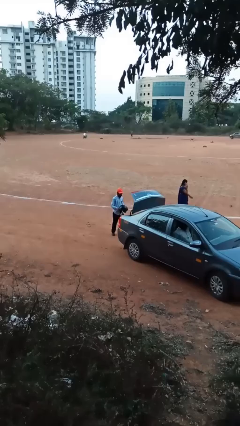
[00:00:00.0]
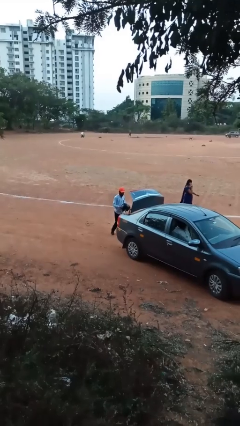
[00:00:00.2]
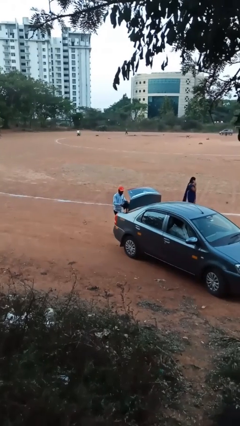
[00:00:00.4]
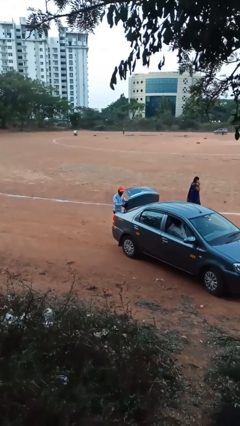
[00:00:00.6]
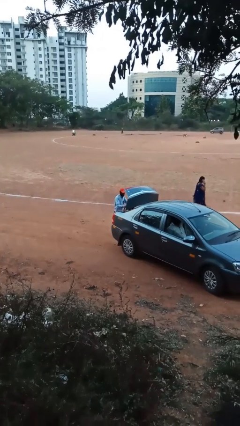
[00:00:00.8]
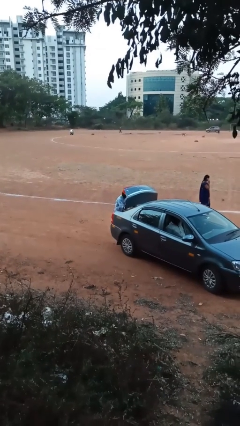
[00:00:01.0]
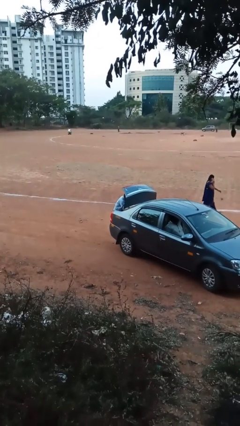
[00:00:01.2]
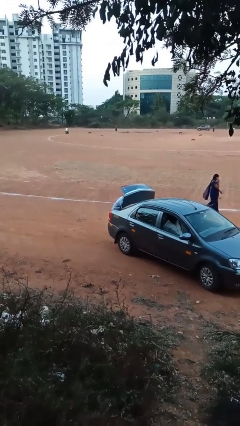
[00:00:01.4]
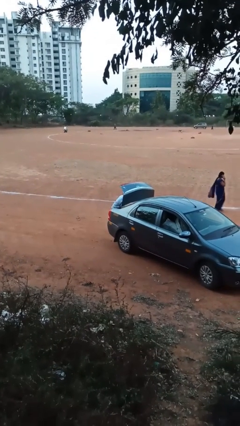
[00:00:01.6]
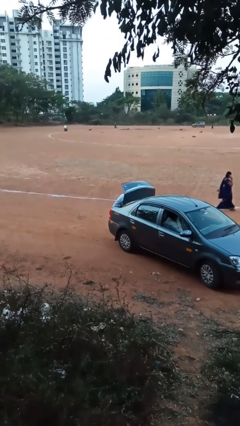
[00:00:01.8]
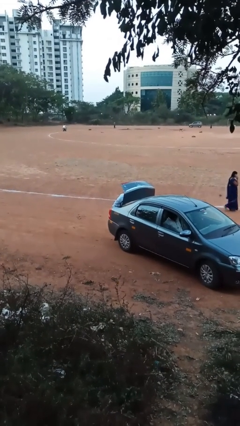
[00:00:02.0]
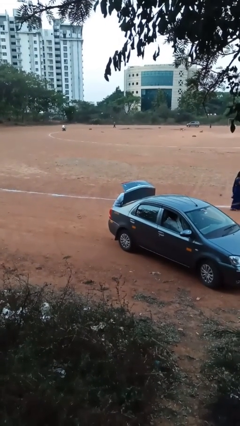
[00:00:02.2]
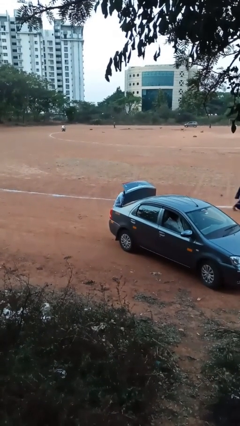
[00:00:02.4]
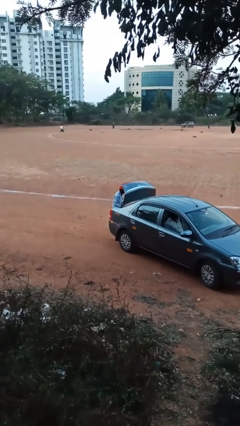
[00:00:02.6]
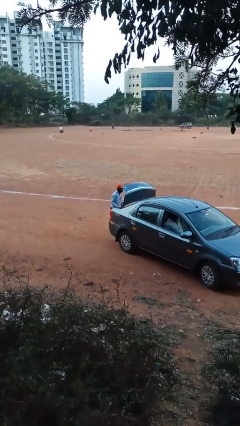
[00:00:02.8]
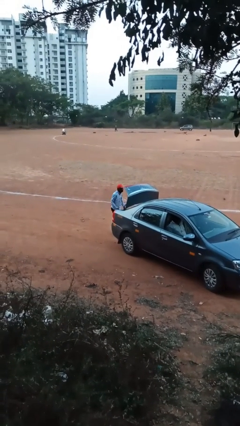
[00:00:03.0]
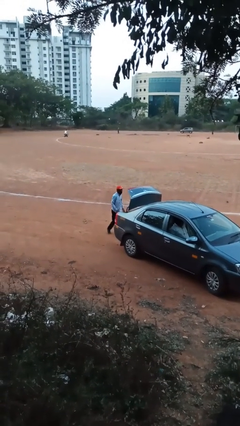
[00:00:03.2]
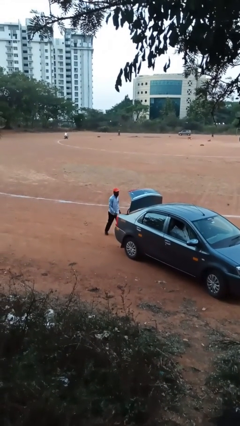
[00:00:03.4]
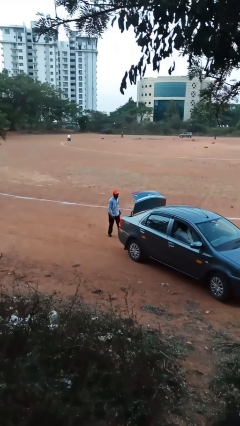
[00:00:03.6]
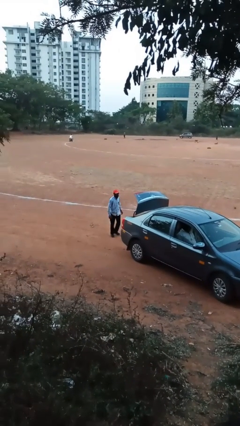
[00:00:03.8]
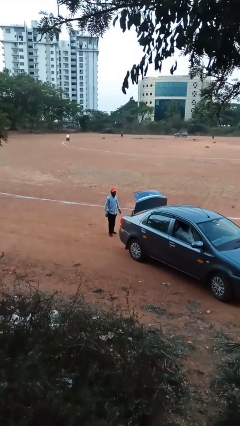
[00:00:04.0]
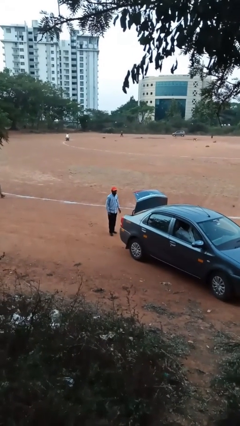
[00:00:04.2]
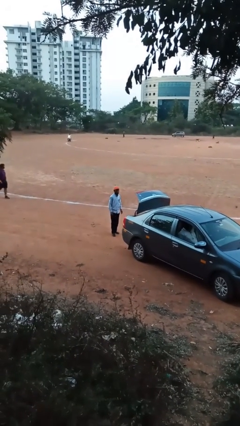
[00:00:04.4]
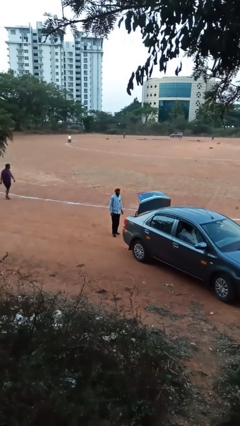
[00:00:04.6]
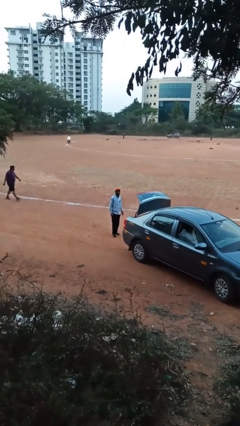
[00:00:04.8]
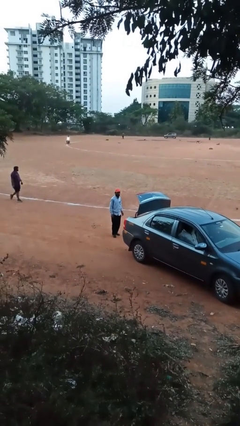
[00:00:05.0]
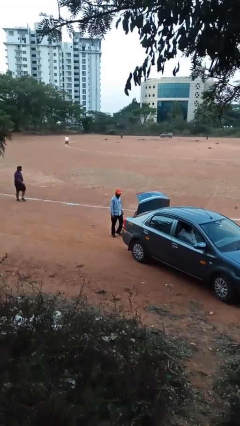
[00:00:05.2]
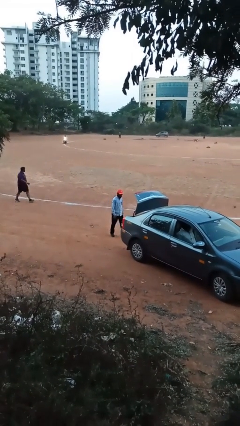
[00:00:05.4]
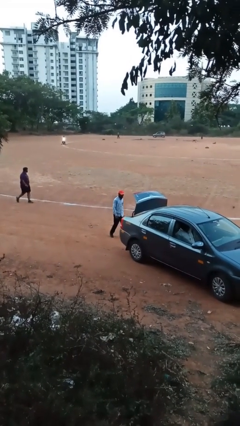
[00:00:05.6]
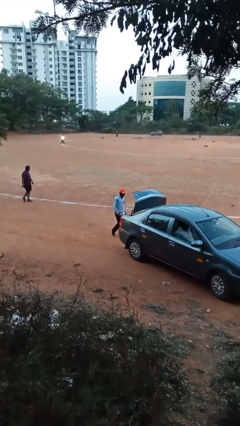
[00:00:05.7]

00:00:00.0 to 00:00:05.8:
person loads car

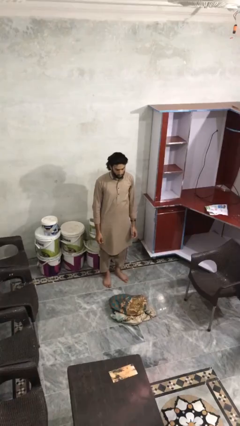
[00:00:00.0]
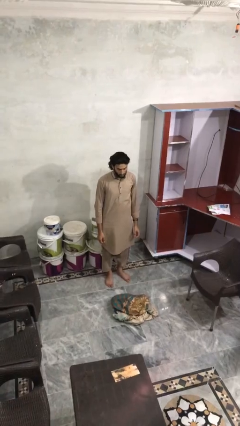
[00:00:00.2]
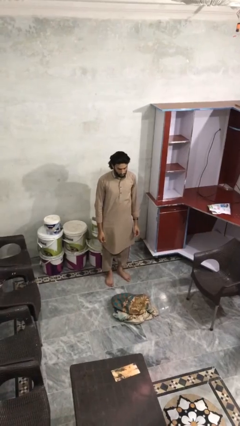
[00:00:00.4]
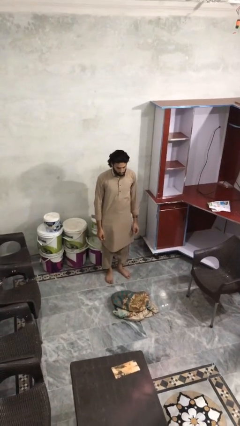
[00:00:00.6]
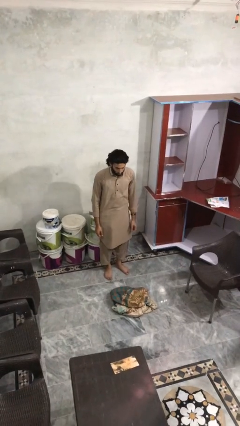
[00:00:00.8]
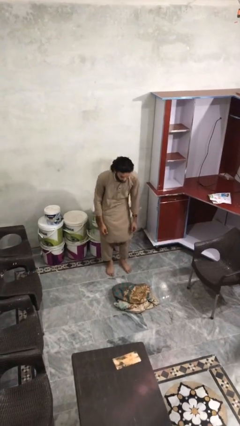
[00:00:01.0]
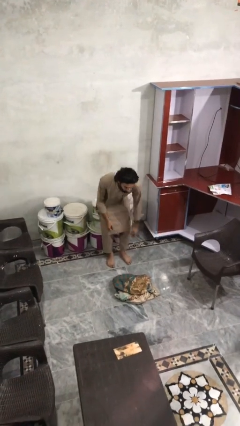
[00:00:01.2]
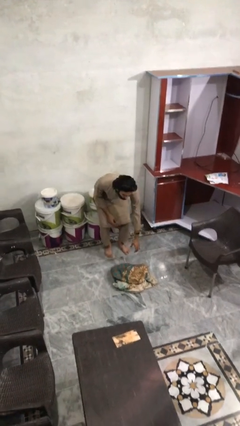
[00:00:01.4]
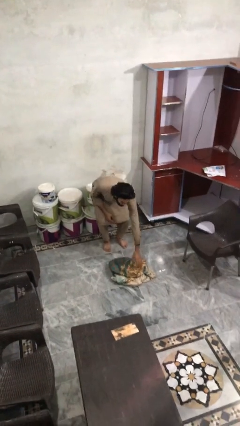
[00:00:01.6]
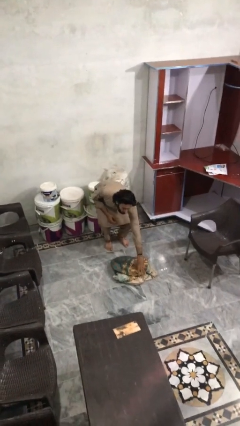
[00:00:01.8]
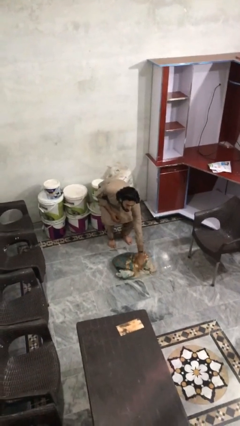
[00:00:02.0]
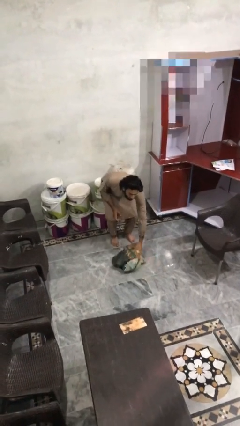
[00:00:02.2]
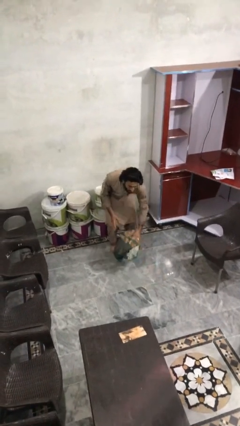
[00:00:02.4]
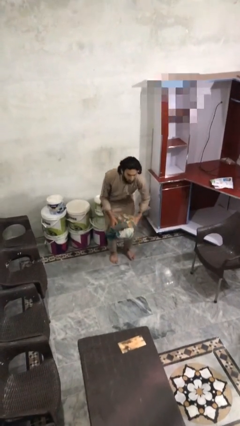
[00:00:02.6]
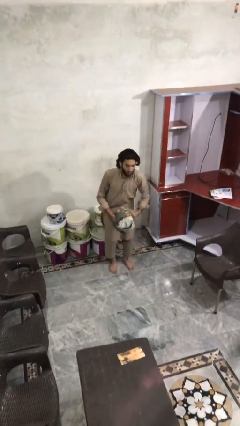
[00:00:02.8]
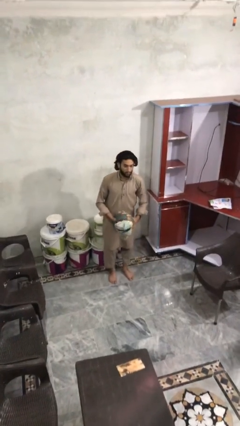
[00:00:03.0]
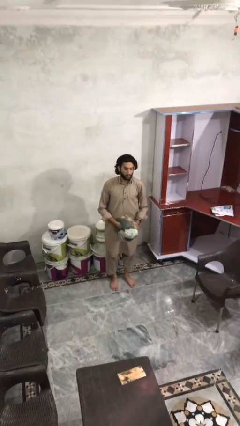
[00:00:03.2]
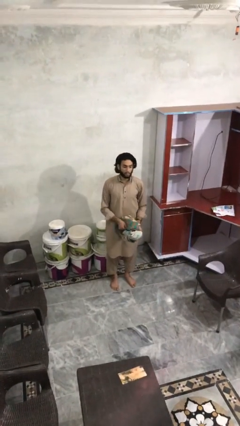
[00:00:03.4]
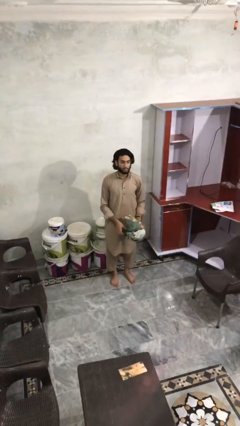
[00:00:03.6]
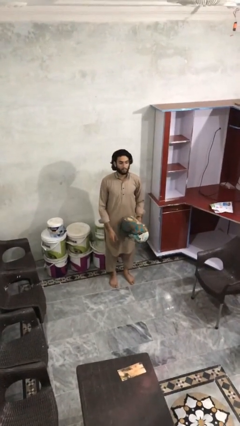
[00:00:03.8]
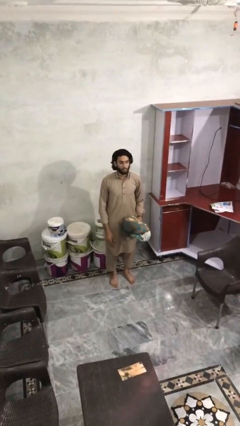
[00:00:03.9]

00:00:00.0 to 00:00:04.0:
person picks up object from floor

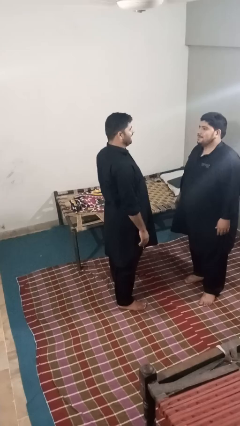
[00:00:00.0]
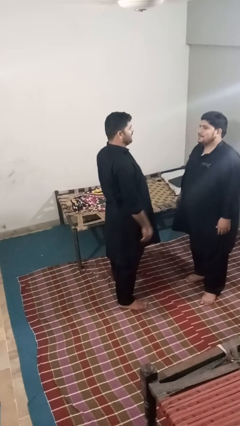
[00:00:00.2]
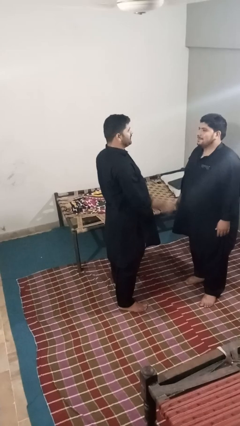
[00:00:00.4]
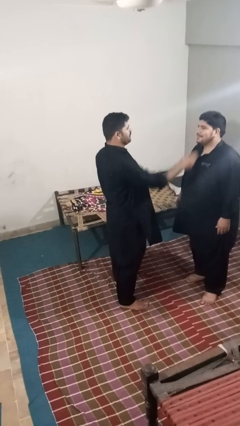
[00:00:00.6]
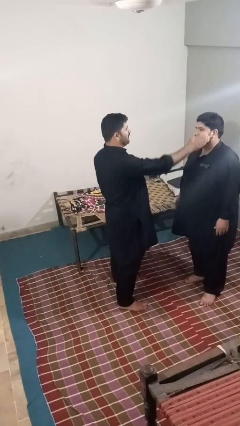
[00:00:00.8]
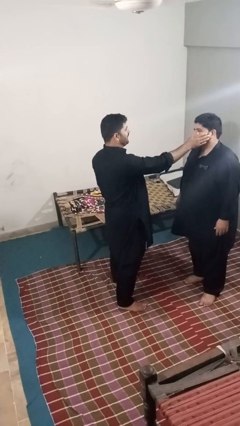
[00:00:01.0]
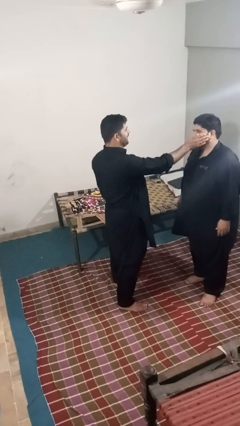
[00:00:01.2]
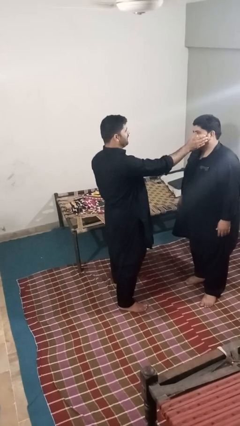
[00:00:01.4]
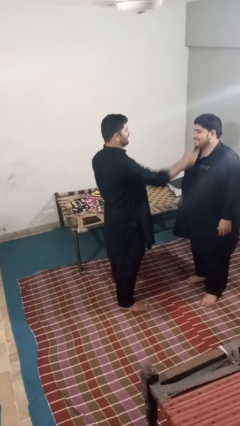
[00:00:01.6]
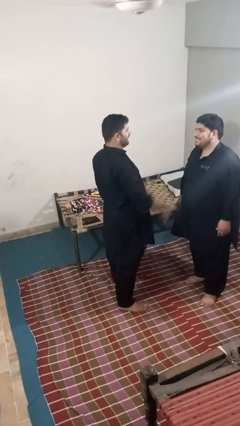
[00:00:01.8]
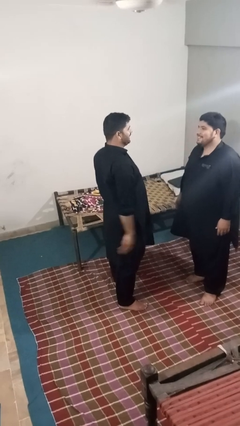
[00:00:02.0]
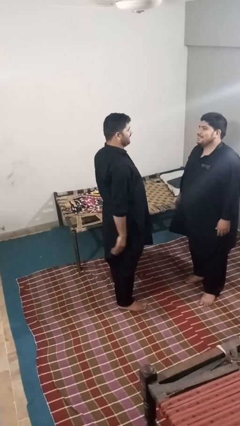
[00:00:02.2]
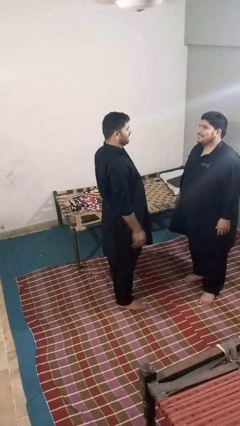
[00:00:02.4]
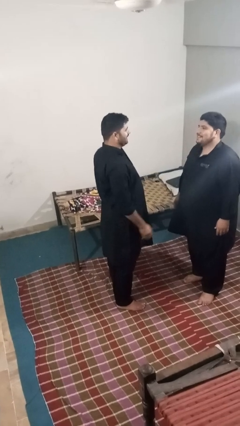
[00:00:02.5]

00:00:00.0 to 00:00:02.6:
person touches face of person

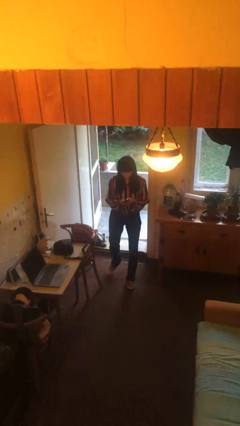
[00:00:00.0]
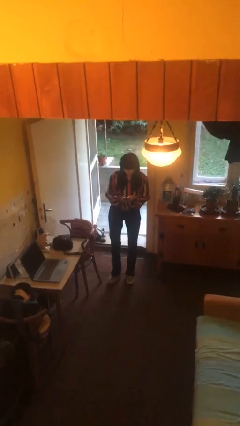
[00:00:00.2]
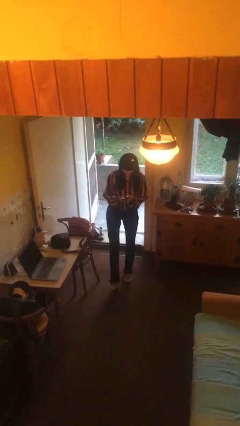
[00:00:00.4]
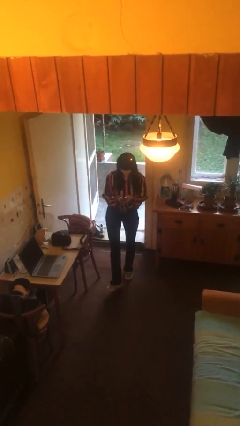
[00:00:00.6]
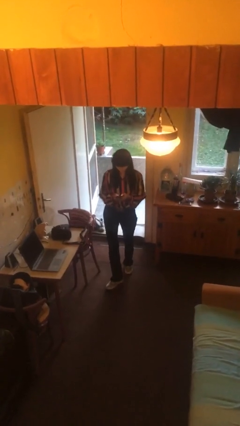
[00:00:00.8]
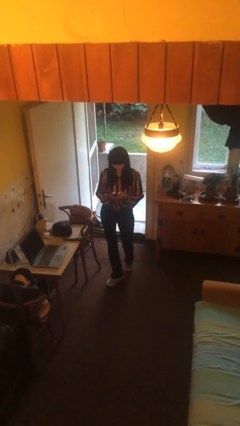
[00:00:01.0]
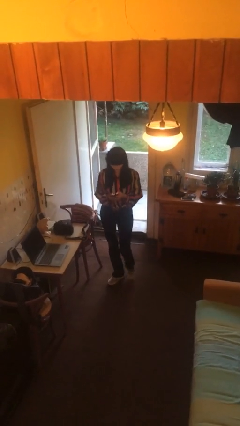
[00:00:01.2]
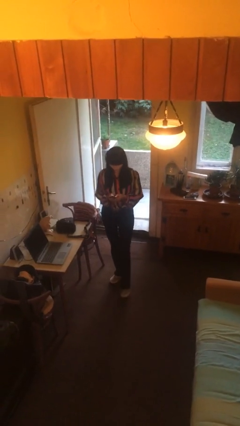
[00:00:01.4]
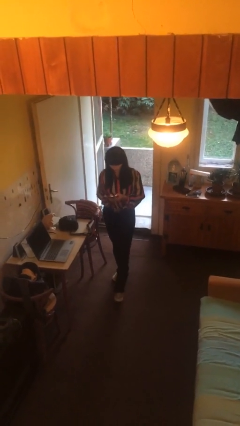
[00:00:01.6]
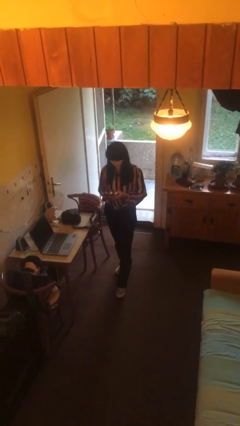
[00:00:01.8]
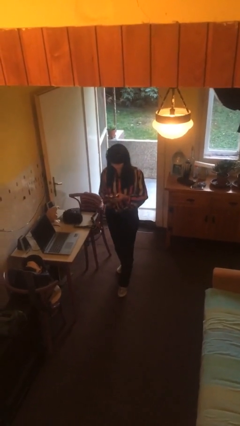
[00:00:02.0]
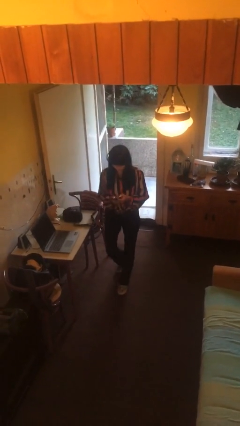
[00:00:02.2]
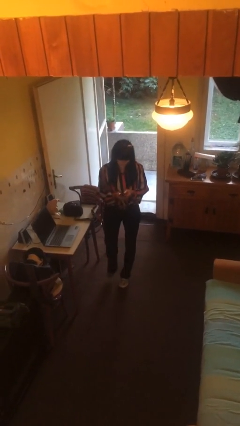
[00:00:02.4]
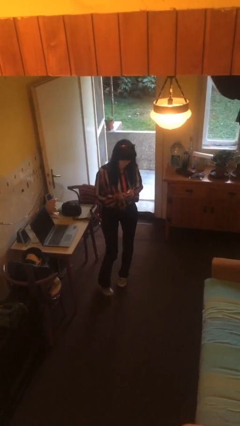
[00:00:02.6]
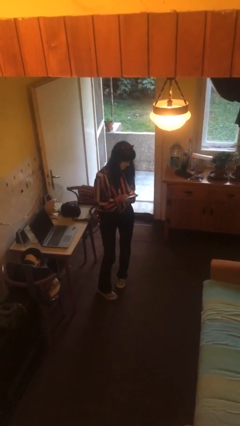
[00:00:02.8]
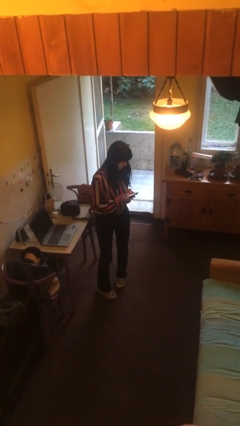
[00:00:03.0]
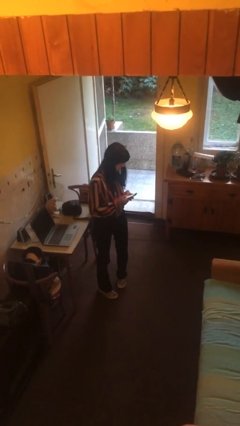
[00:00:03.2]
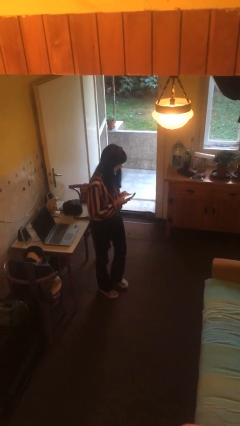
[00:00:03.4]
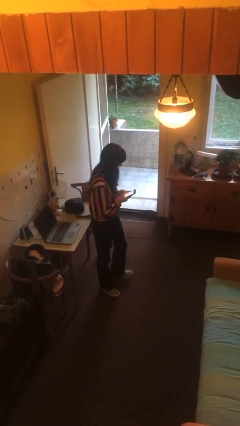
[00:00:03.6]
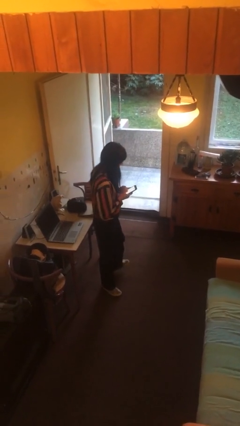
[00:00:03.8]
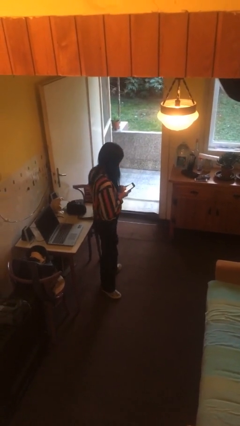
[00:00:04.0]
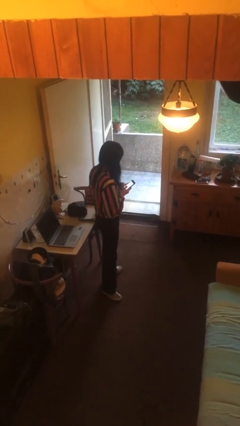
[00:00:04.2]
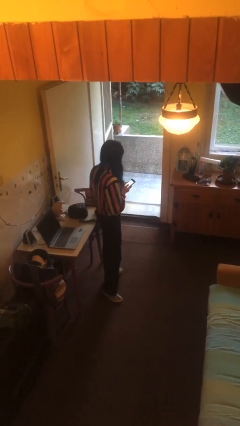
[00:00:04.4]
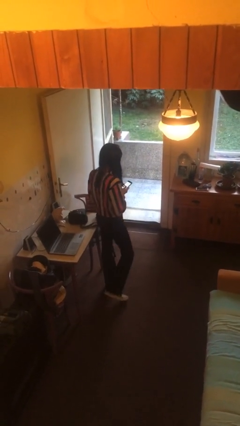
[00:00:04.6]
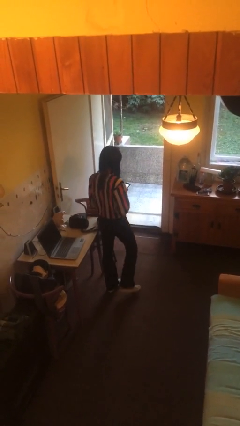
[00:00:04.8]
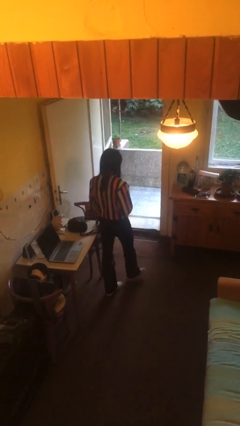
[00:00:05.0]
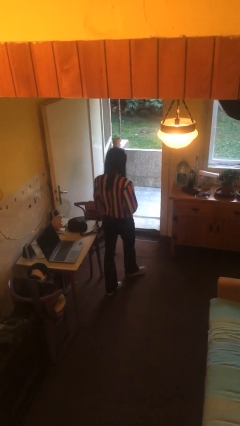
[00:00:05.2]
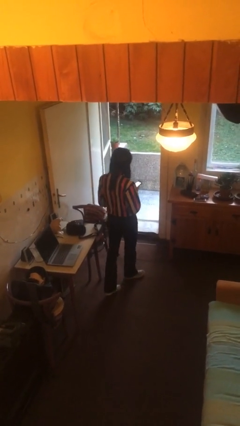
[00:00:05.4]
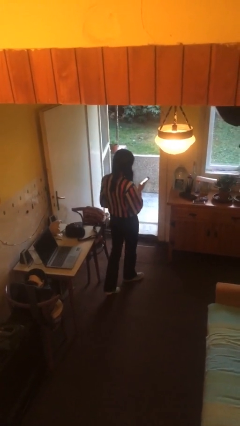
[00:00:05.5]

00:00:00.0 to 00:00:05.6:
person texts on phone
